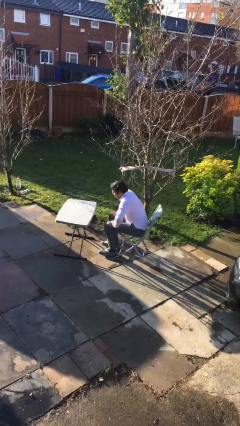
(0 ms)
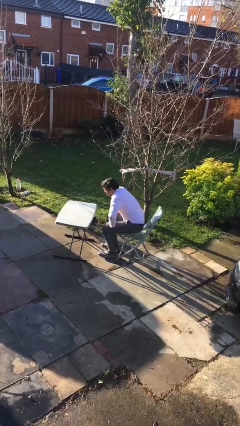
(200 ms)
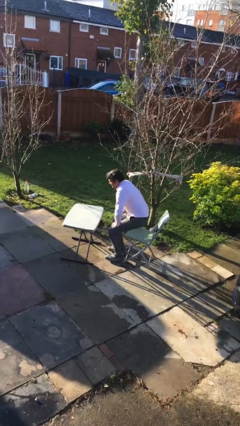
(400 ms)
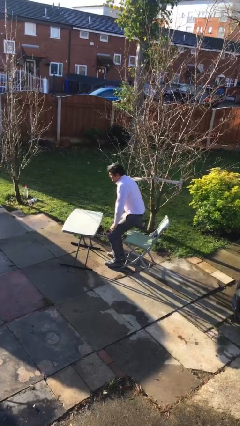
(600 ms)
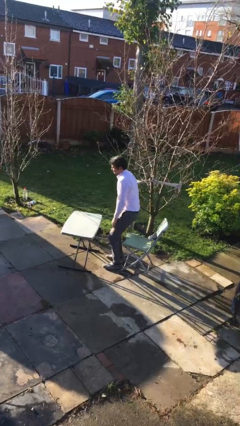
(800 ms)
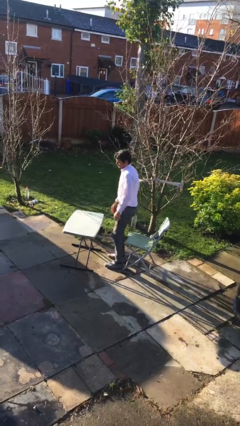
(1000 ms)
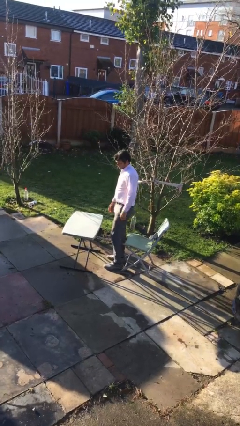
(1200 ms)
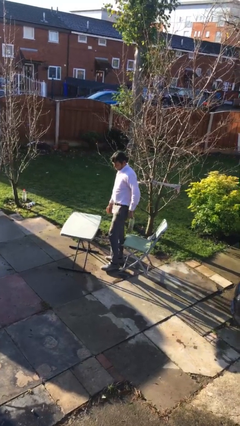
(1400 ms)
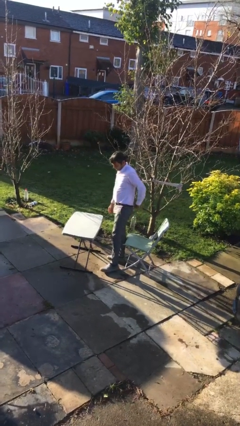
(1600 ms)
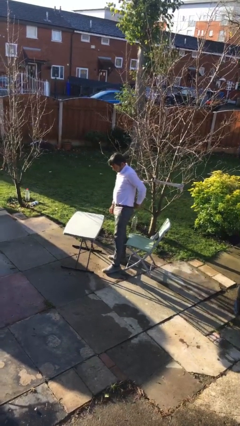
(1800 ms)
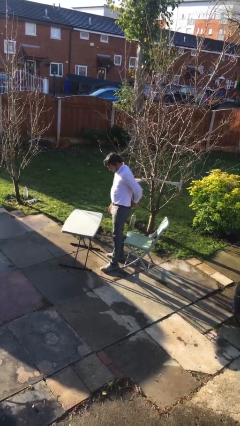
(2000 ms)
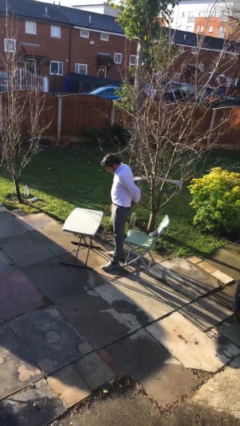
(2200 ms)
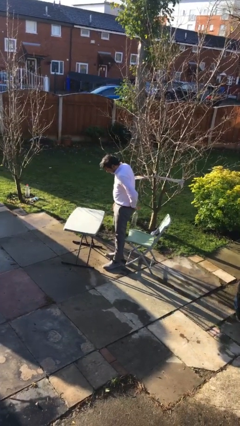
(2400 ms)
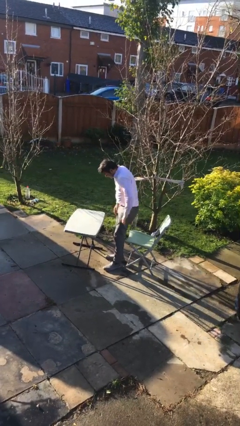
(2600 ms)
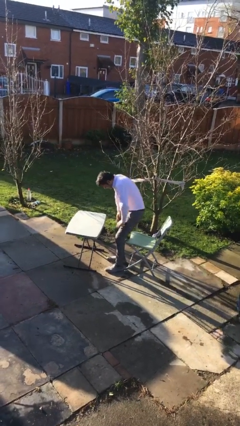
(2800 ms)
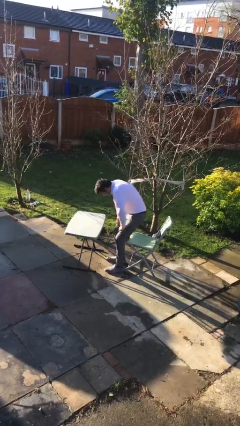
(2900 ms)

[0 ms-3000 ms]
person stands up

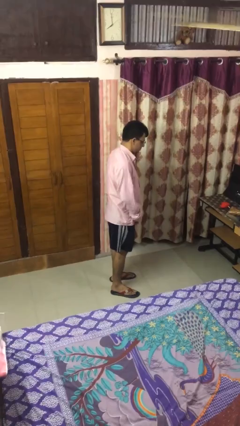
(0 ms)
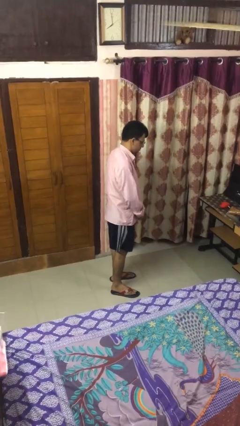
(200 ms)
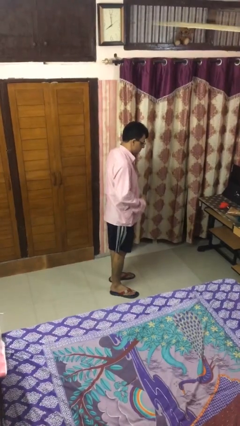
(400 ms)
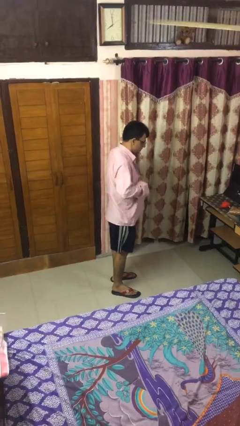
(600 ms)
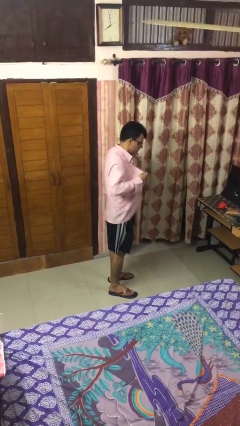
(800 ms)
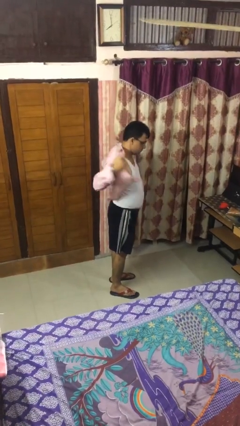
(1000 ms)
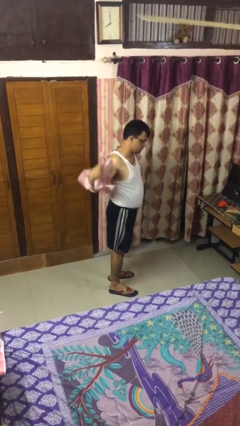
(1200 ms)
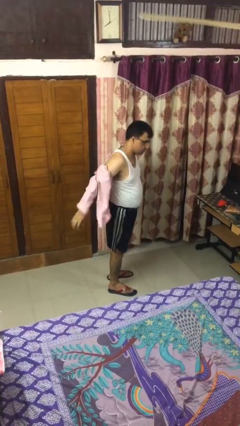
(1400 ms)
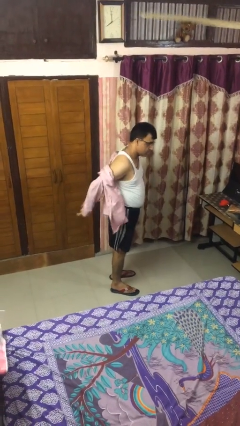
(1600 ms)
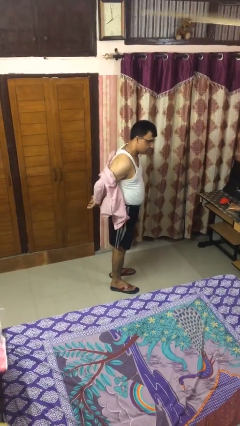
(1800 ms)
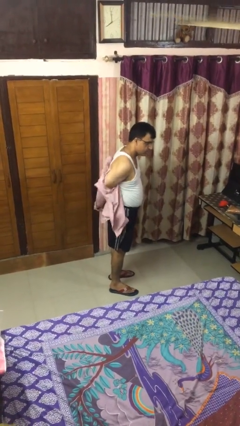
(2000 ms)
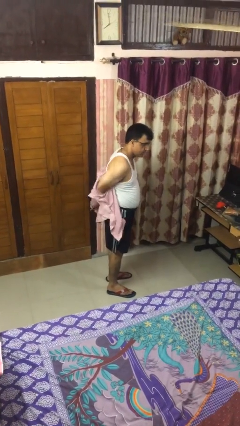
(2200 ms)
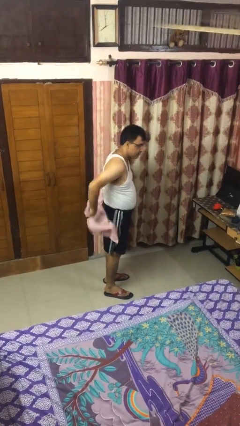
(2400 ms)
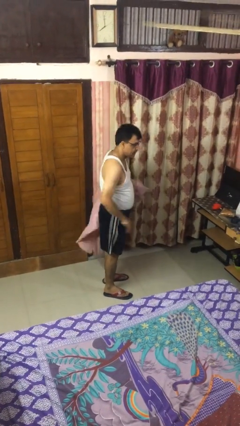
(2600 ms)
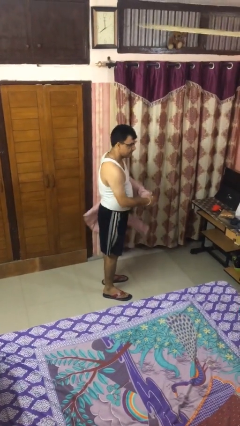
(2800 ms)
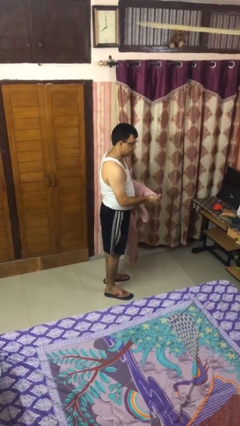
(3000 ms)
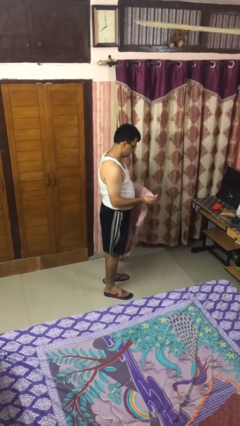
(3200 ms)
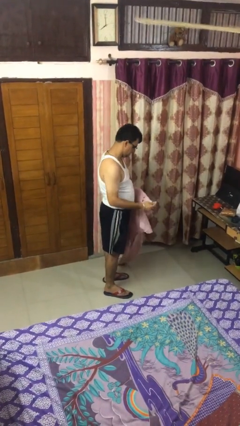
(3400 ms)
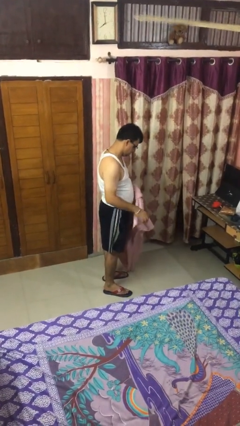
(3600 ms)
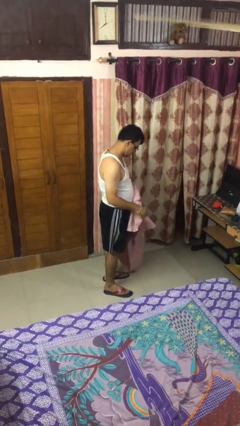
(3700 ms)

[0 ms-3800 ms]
person takes off shirt

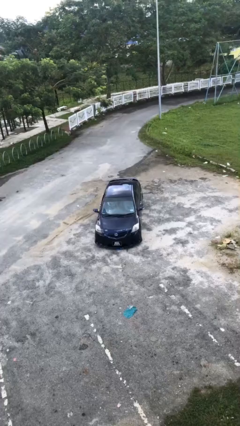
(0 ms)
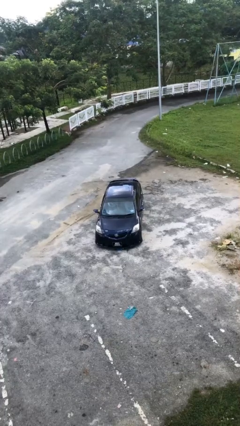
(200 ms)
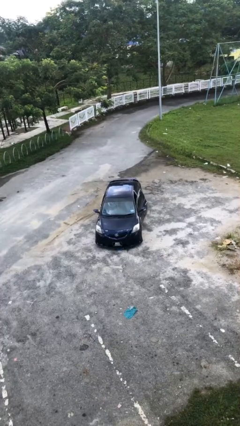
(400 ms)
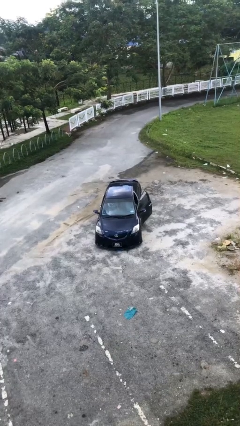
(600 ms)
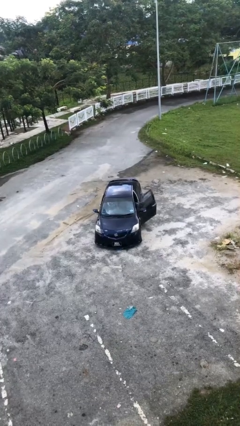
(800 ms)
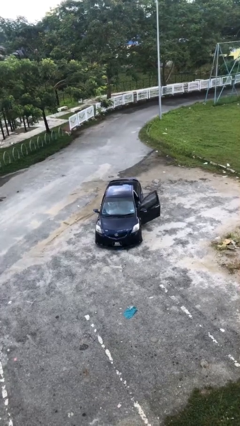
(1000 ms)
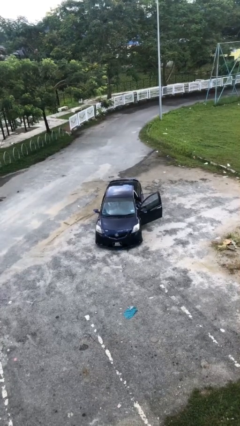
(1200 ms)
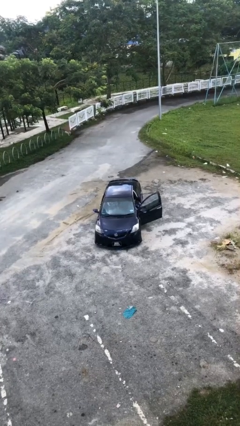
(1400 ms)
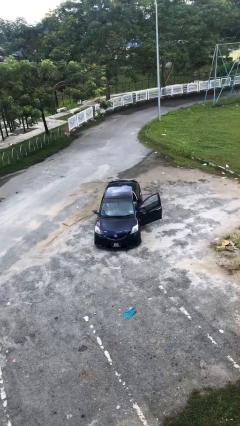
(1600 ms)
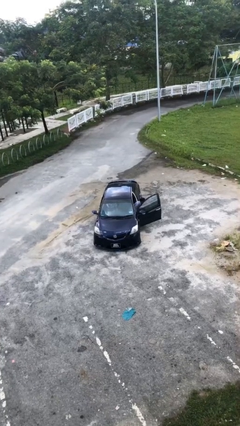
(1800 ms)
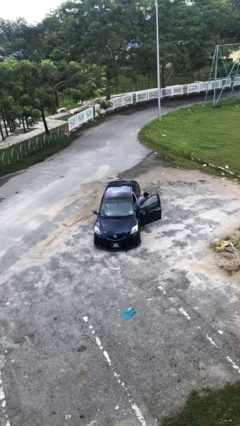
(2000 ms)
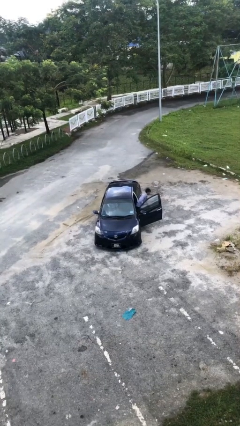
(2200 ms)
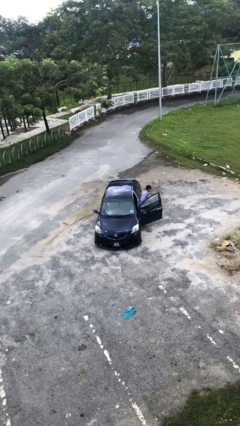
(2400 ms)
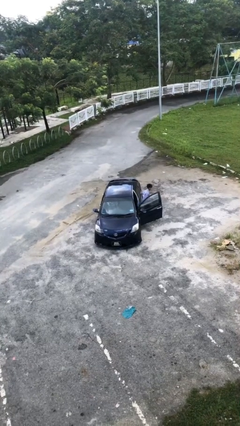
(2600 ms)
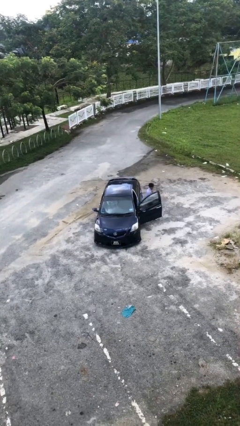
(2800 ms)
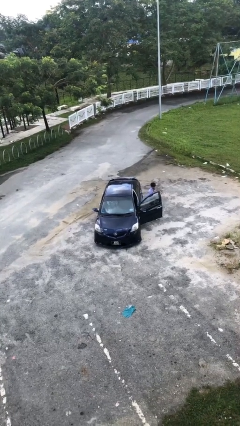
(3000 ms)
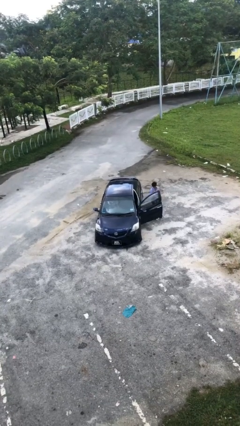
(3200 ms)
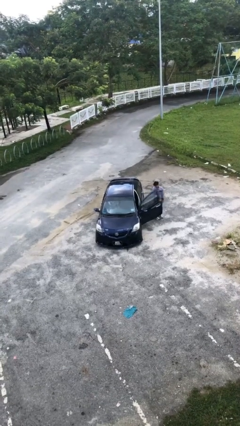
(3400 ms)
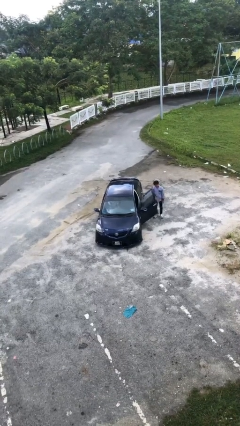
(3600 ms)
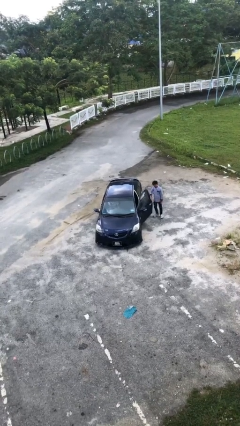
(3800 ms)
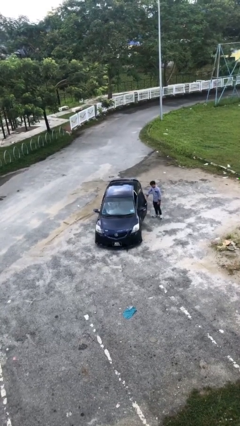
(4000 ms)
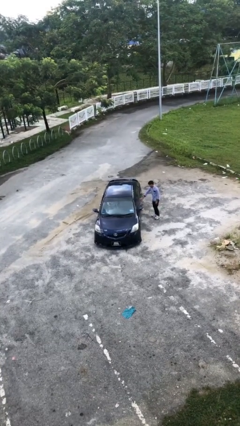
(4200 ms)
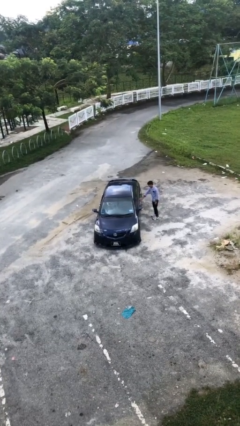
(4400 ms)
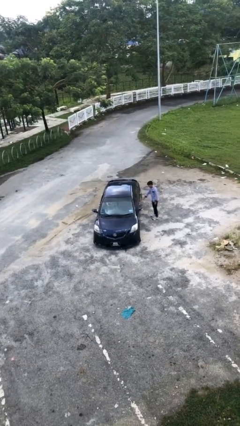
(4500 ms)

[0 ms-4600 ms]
car drops off person

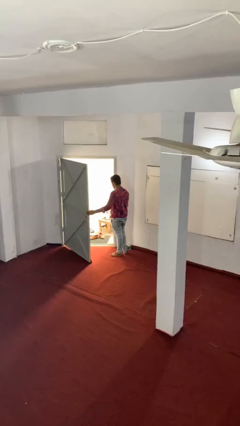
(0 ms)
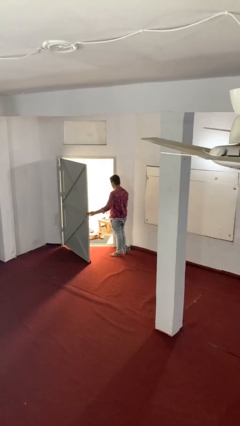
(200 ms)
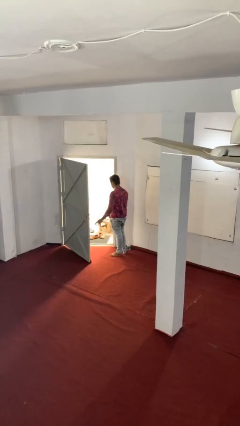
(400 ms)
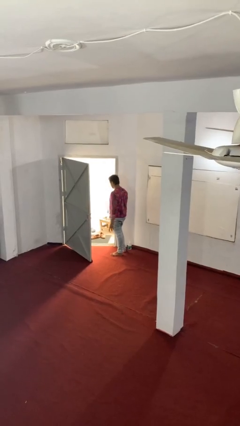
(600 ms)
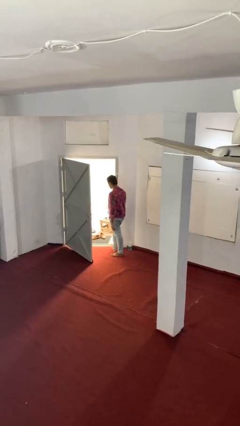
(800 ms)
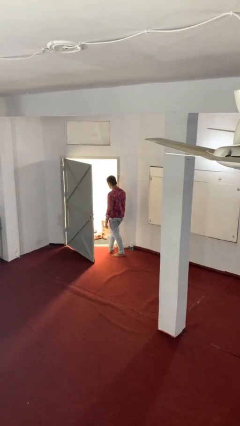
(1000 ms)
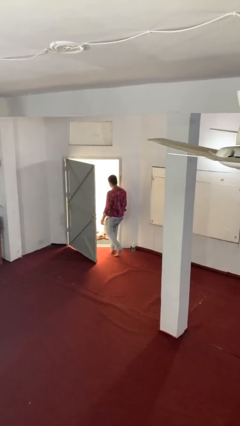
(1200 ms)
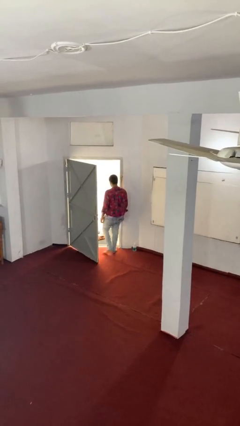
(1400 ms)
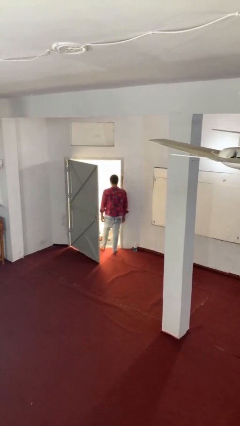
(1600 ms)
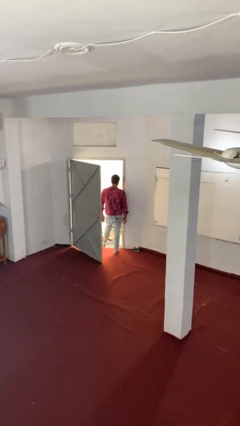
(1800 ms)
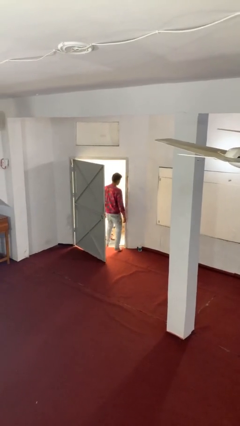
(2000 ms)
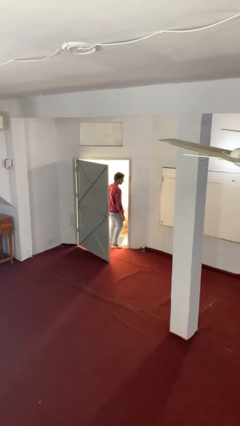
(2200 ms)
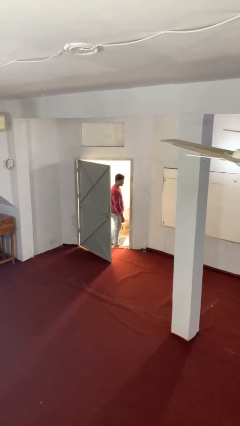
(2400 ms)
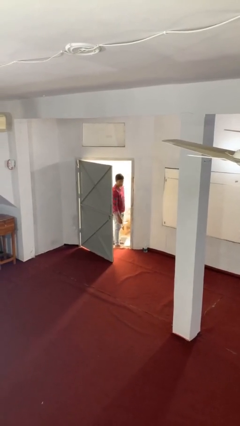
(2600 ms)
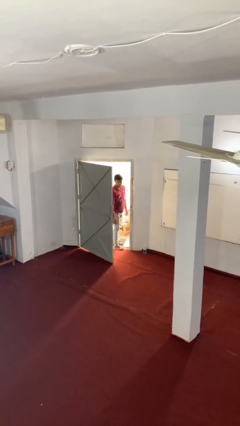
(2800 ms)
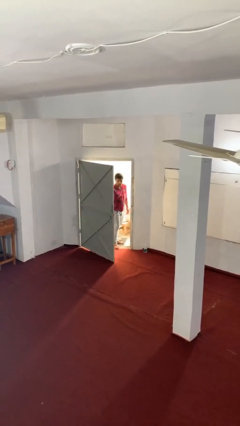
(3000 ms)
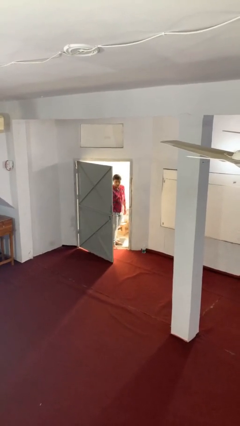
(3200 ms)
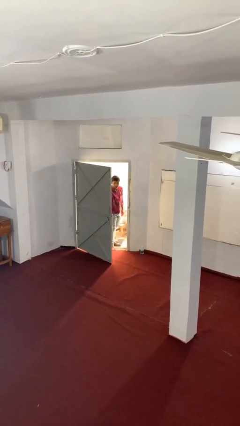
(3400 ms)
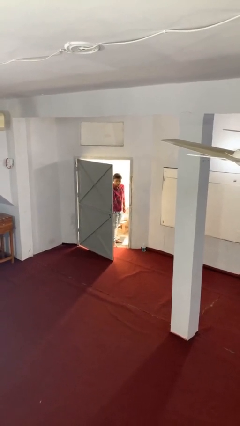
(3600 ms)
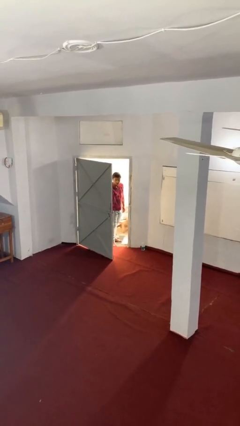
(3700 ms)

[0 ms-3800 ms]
person exits scene through structure

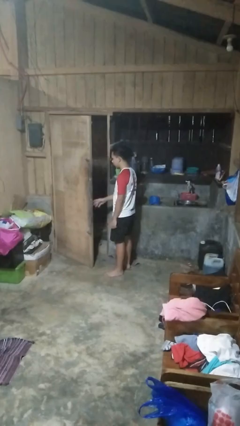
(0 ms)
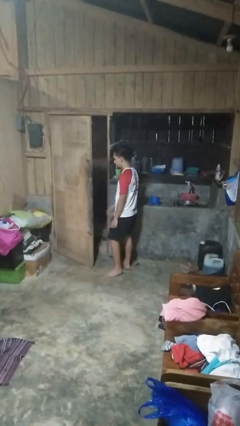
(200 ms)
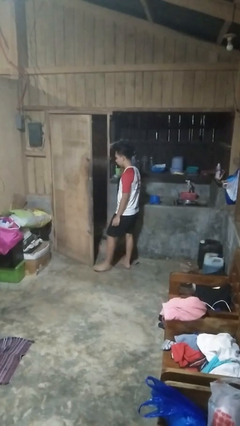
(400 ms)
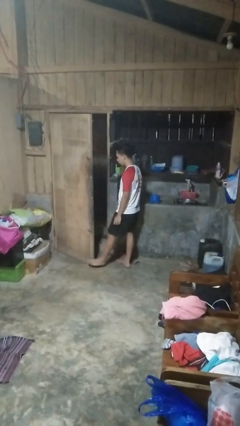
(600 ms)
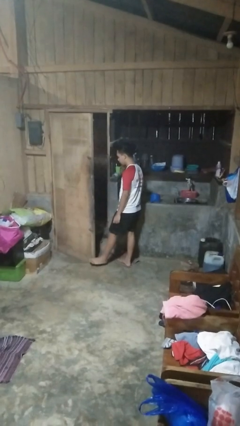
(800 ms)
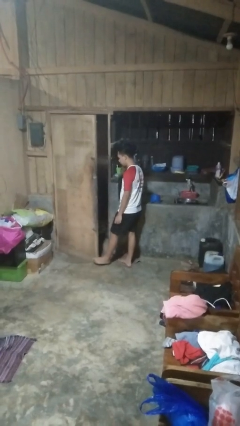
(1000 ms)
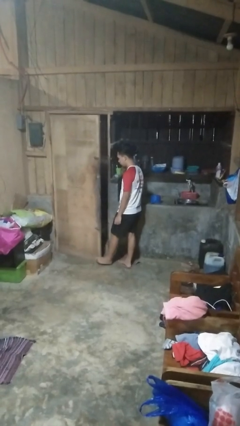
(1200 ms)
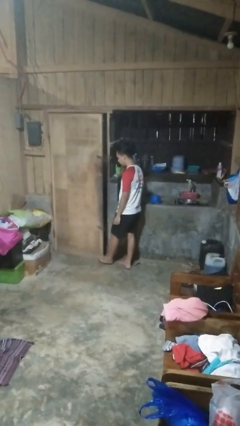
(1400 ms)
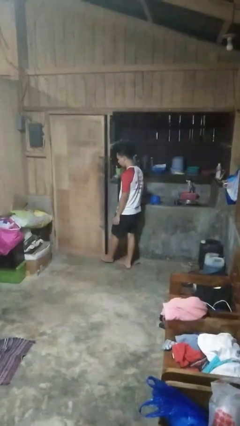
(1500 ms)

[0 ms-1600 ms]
person closes door with foot

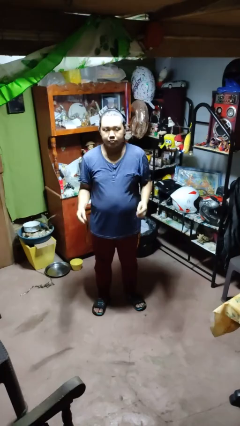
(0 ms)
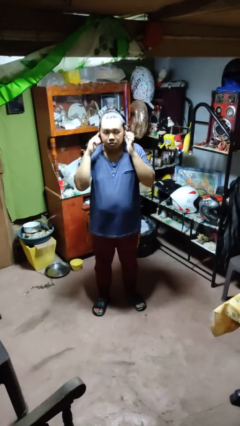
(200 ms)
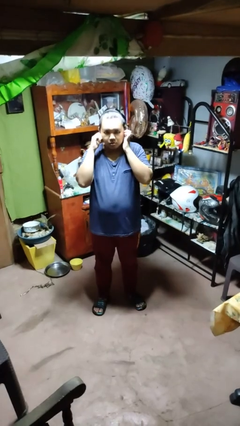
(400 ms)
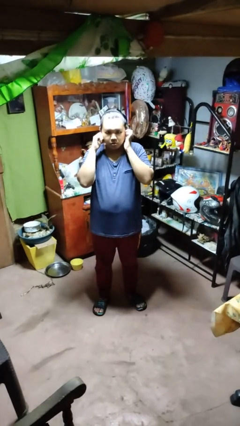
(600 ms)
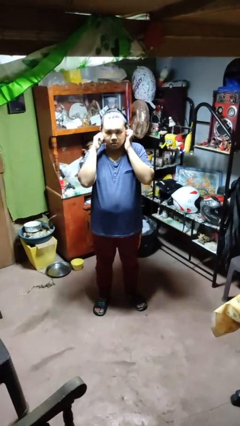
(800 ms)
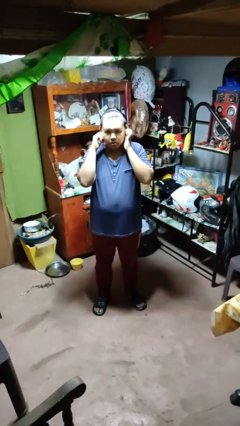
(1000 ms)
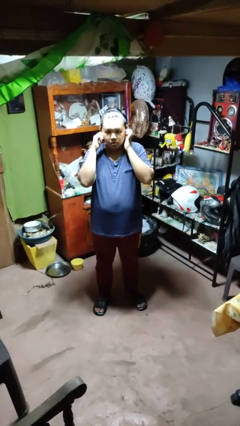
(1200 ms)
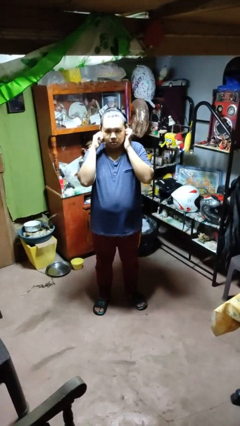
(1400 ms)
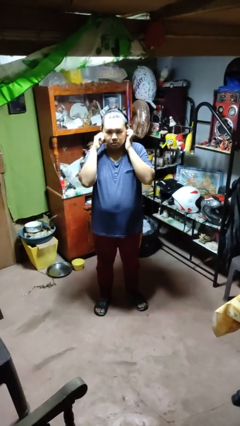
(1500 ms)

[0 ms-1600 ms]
person puts fingers in ear
